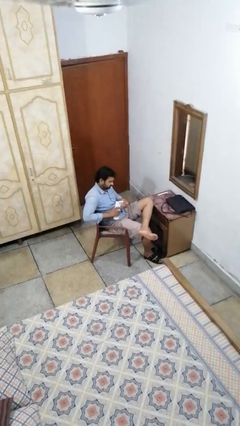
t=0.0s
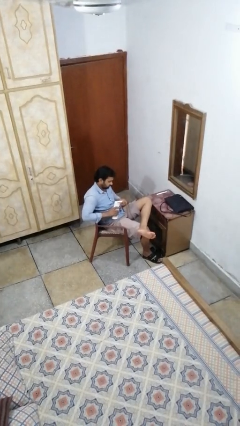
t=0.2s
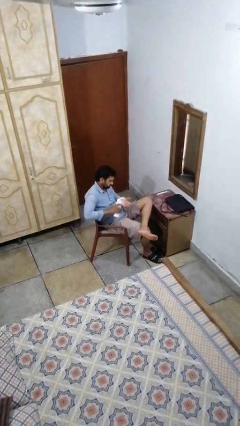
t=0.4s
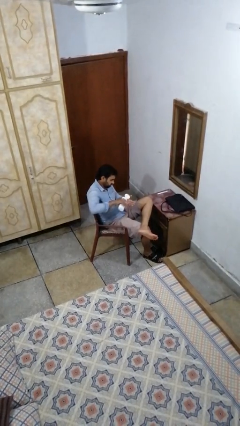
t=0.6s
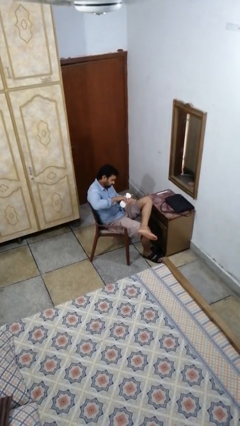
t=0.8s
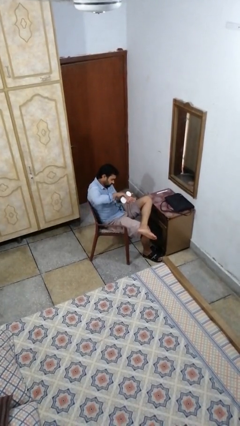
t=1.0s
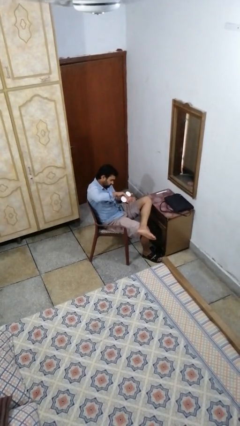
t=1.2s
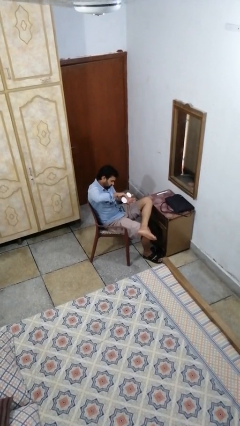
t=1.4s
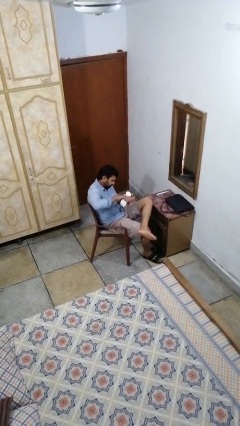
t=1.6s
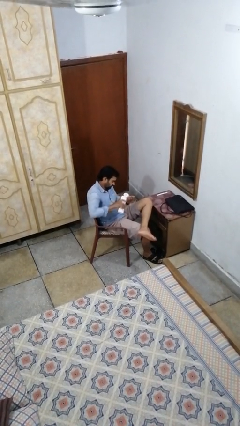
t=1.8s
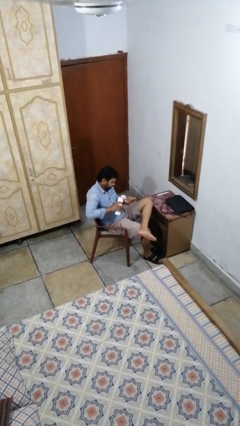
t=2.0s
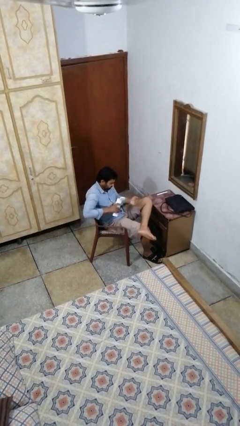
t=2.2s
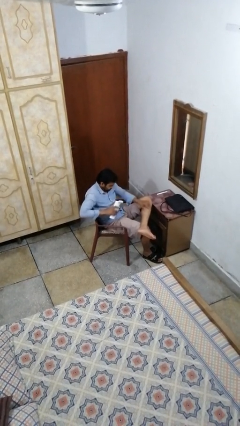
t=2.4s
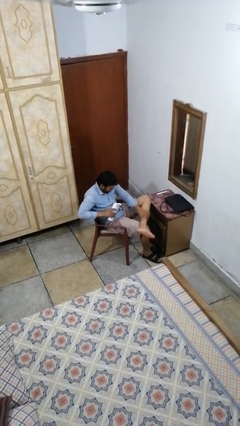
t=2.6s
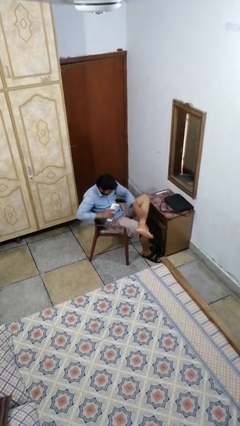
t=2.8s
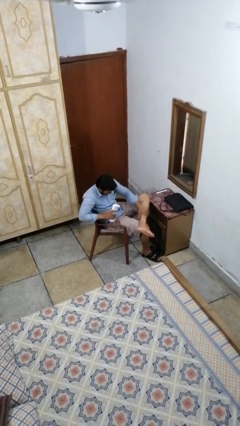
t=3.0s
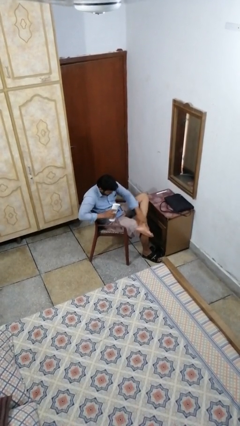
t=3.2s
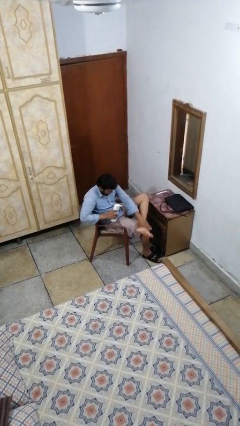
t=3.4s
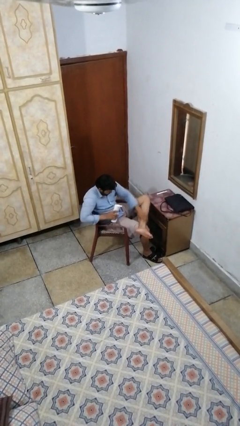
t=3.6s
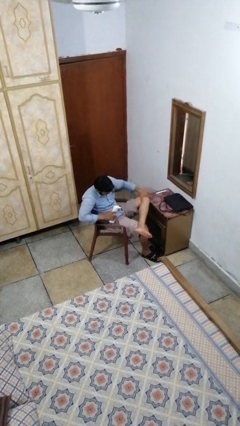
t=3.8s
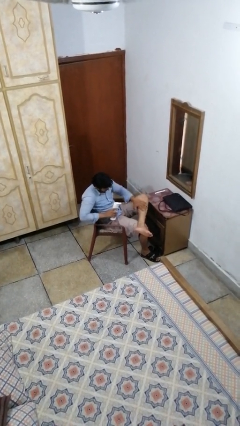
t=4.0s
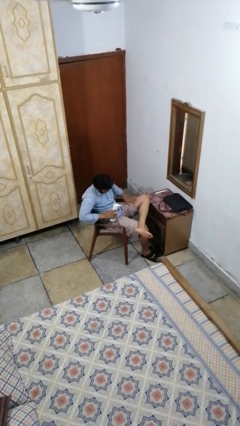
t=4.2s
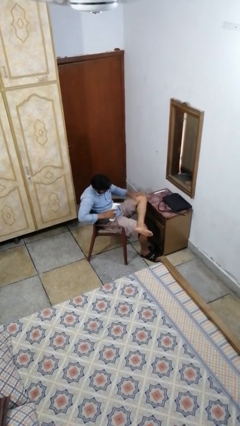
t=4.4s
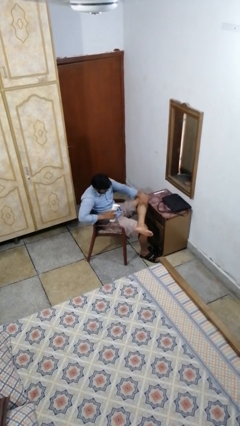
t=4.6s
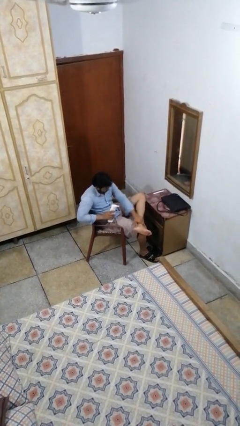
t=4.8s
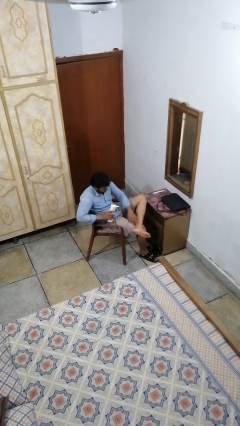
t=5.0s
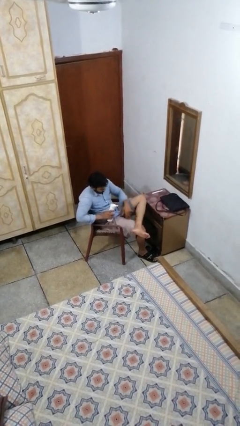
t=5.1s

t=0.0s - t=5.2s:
person applies sunscreen

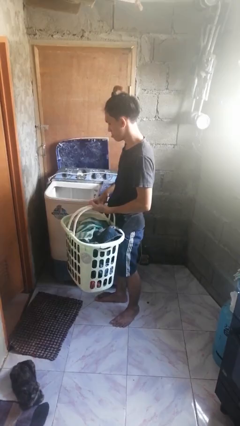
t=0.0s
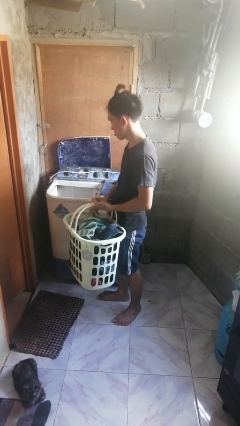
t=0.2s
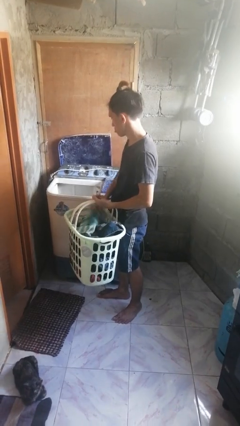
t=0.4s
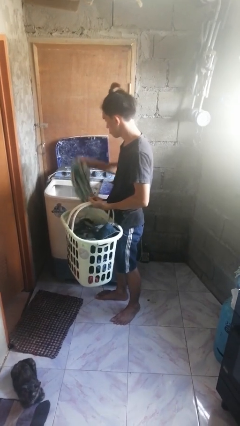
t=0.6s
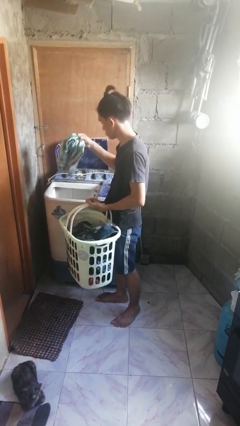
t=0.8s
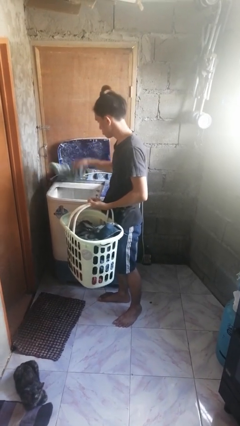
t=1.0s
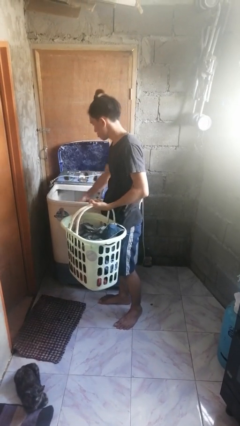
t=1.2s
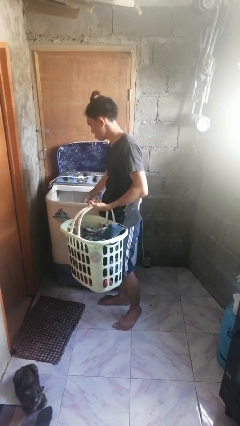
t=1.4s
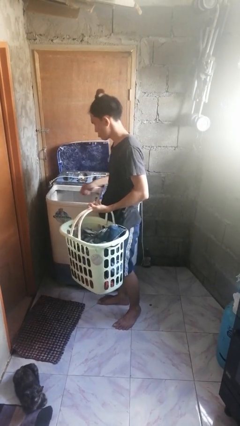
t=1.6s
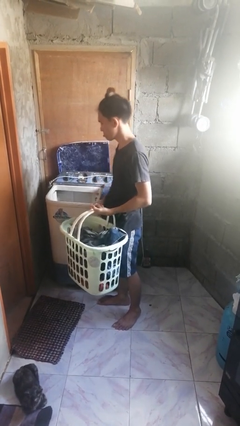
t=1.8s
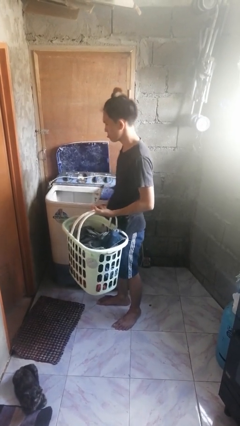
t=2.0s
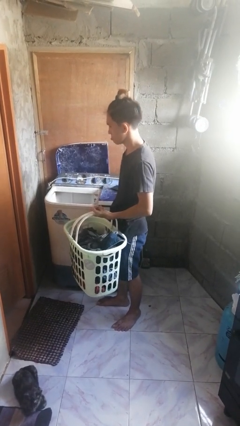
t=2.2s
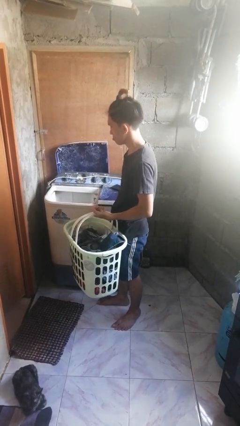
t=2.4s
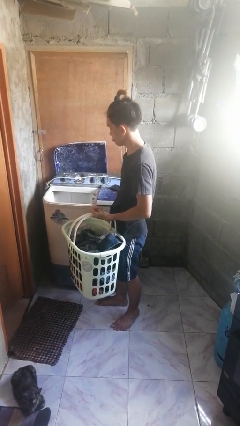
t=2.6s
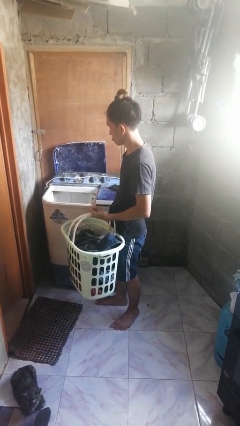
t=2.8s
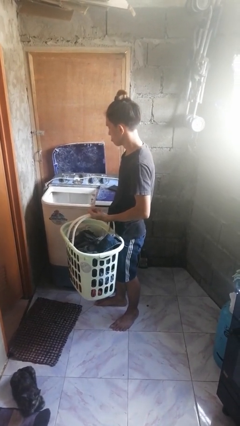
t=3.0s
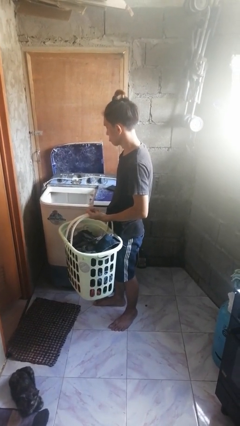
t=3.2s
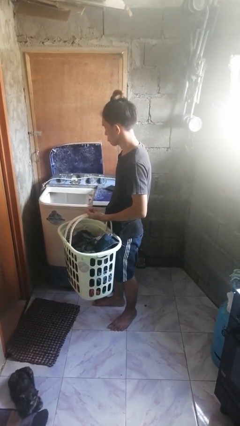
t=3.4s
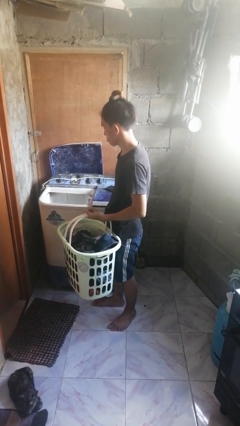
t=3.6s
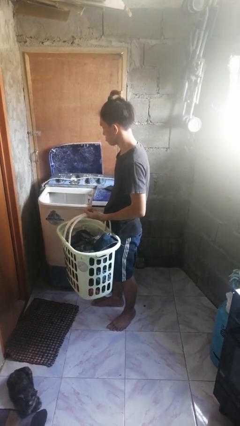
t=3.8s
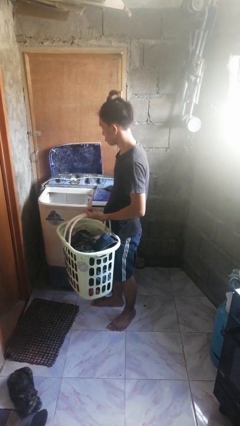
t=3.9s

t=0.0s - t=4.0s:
person loads clotheswasher

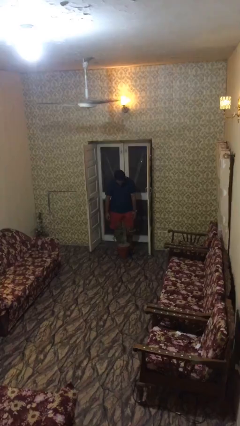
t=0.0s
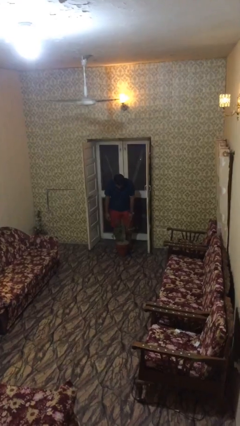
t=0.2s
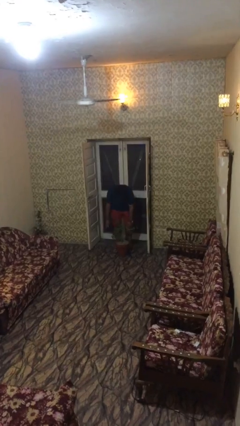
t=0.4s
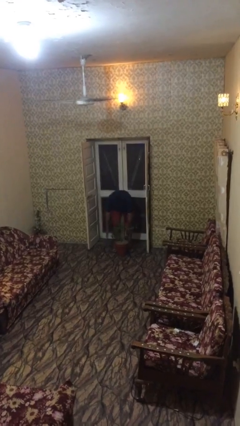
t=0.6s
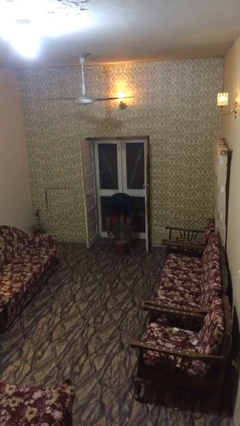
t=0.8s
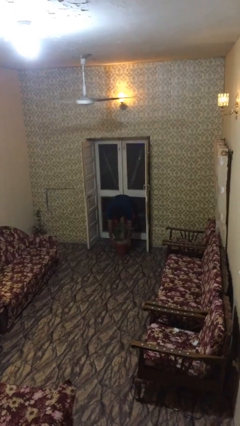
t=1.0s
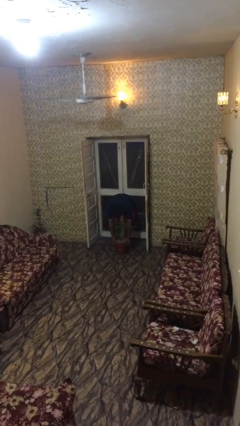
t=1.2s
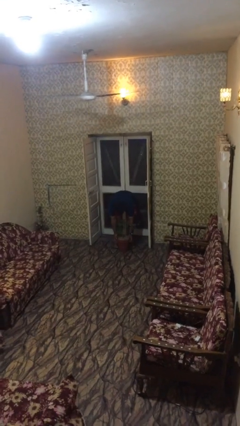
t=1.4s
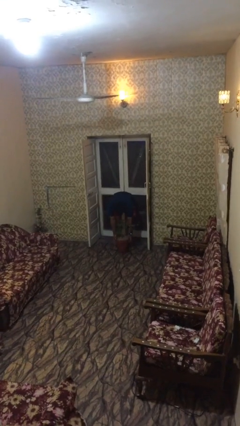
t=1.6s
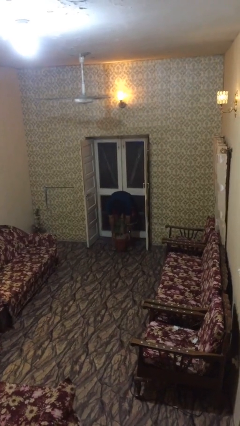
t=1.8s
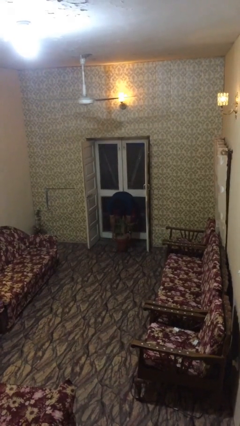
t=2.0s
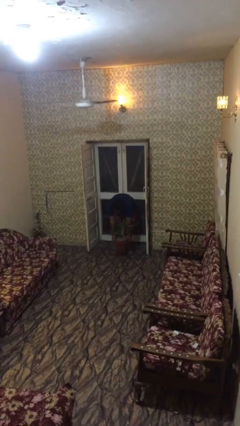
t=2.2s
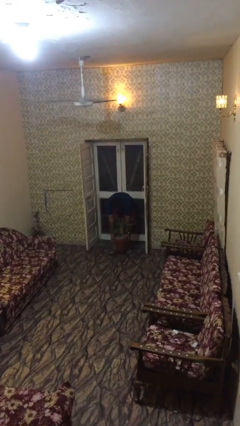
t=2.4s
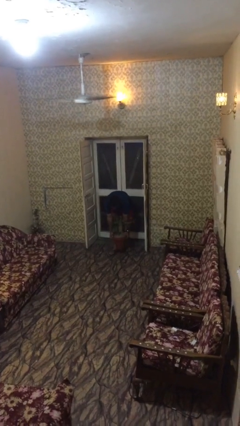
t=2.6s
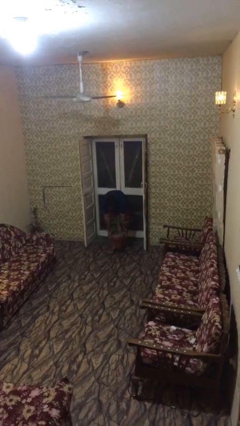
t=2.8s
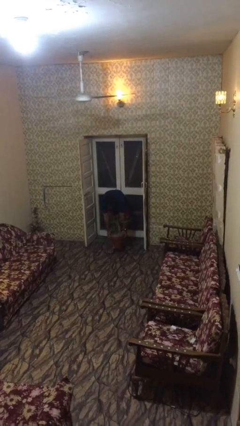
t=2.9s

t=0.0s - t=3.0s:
person picks up object from floor

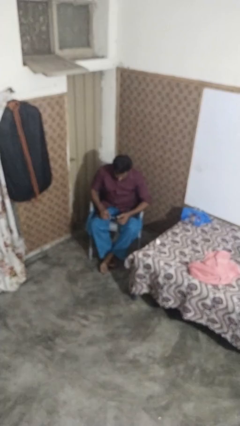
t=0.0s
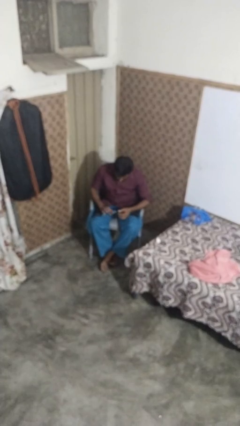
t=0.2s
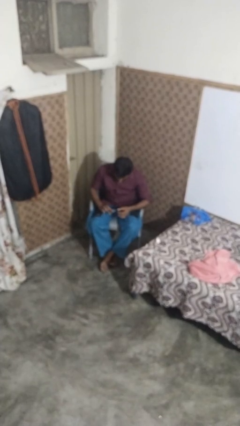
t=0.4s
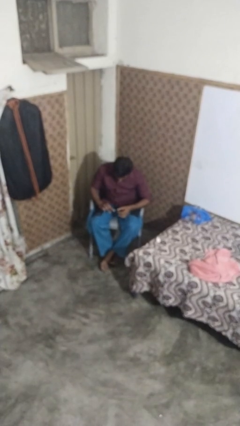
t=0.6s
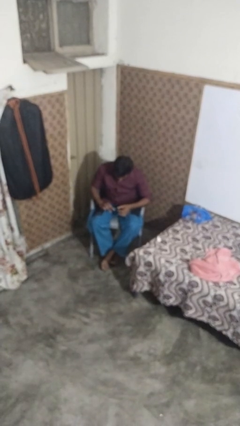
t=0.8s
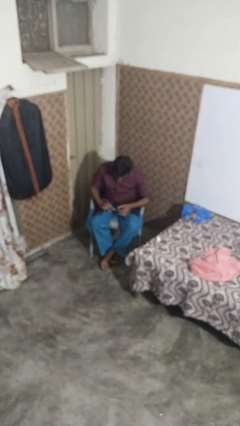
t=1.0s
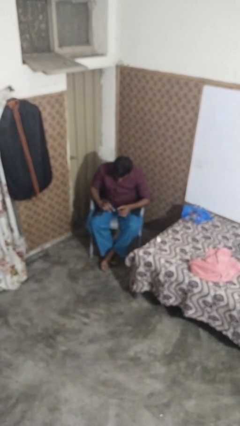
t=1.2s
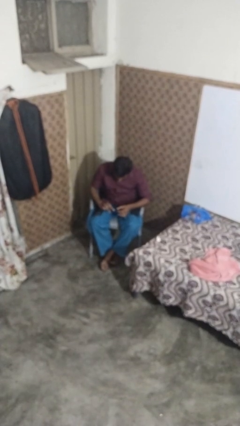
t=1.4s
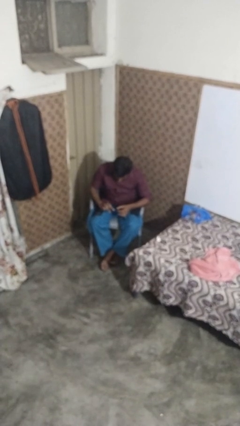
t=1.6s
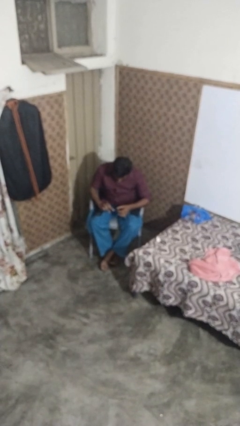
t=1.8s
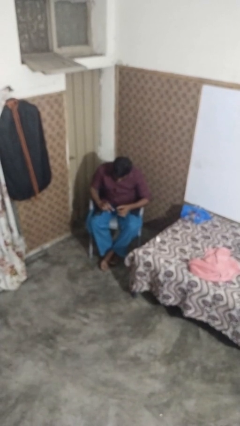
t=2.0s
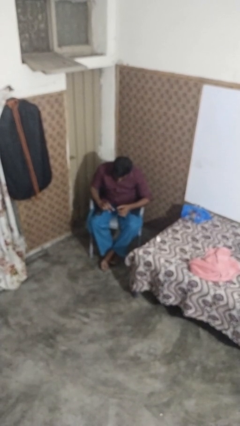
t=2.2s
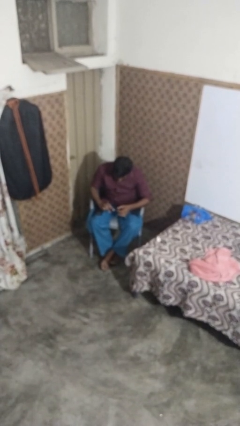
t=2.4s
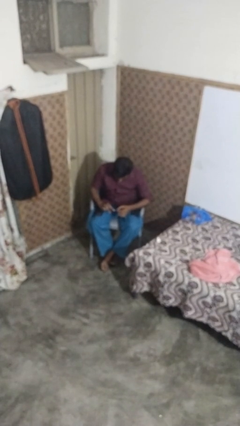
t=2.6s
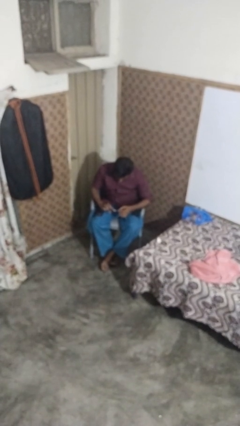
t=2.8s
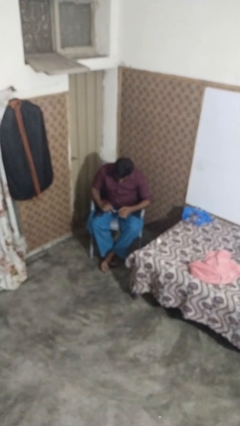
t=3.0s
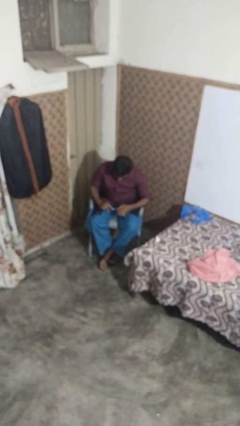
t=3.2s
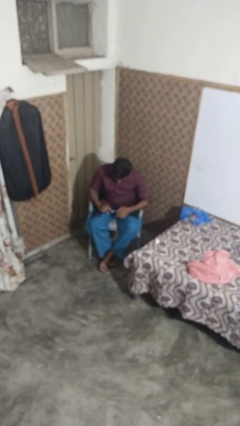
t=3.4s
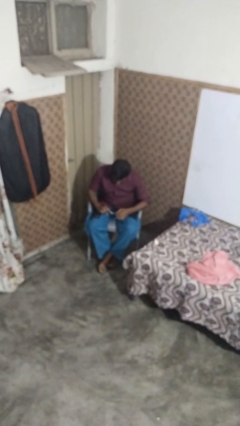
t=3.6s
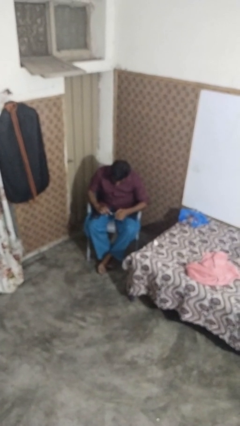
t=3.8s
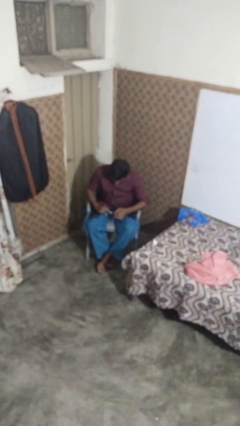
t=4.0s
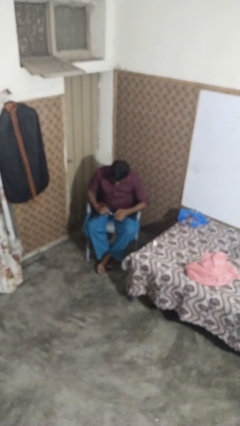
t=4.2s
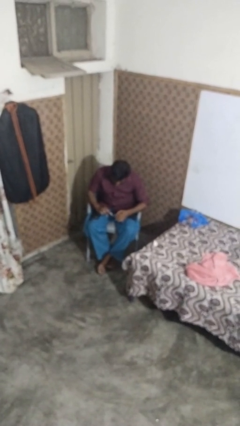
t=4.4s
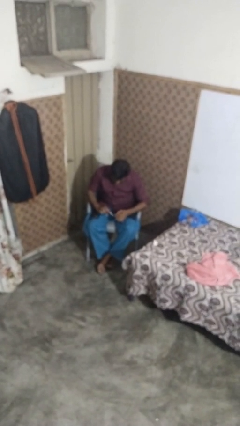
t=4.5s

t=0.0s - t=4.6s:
person paints fingernails

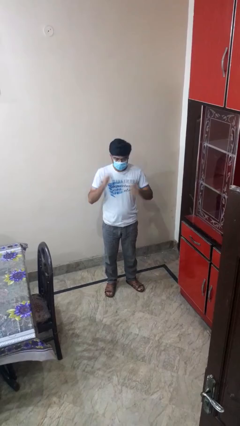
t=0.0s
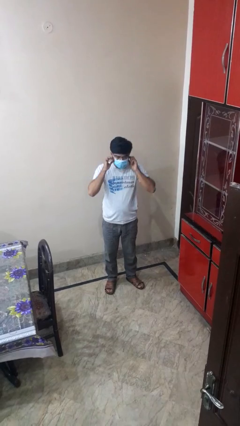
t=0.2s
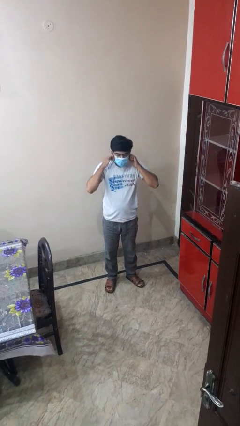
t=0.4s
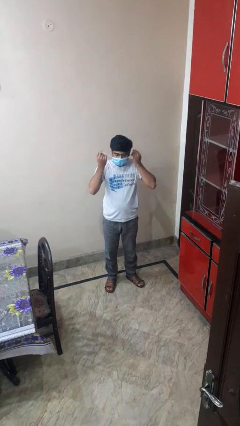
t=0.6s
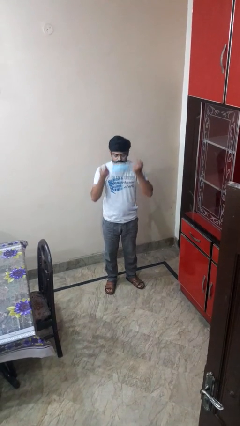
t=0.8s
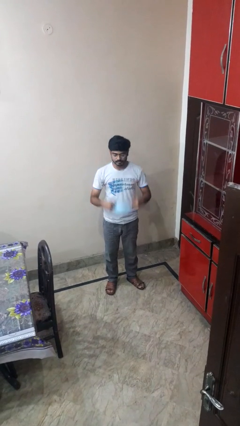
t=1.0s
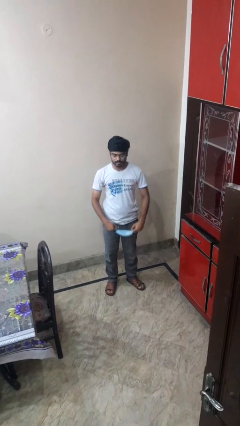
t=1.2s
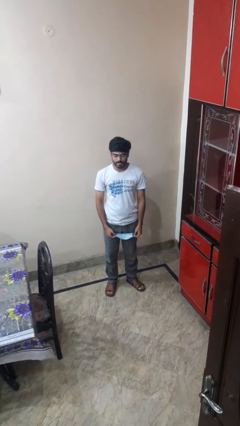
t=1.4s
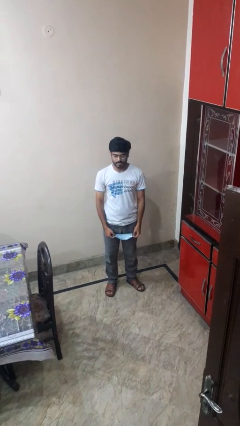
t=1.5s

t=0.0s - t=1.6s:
person takes off facemask
